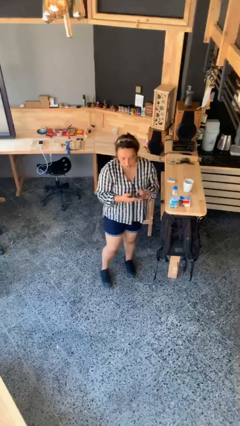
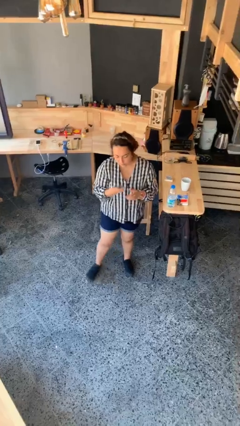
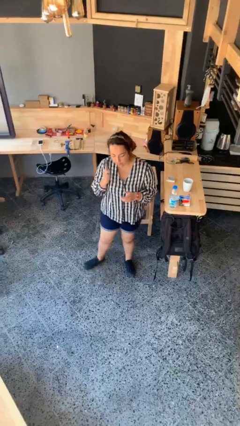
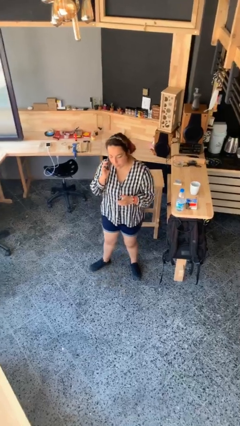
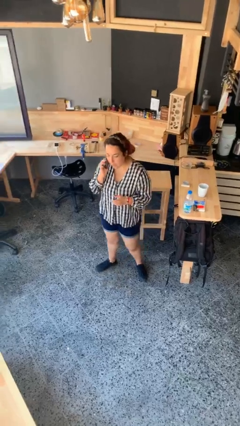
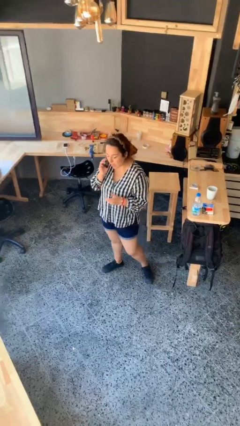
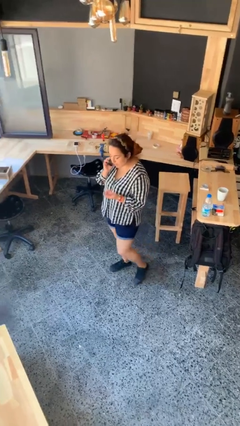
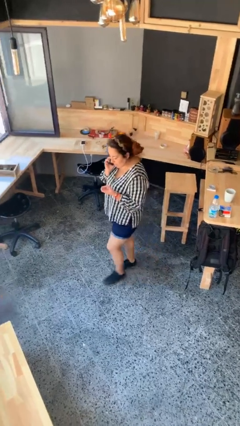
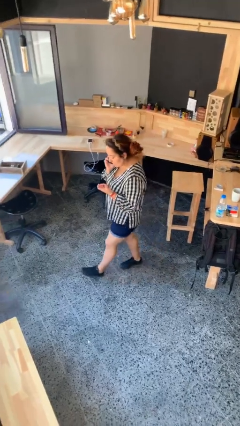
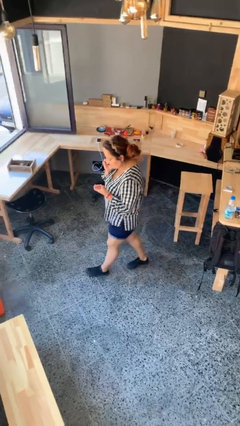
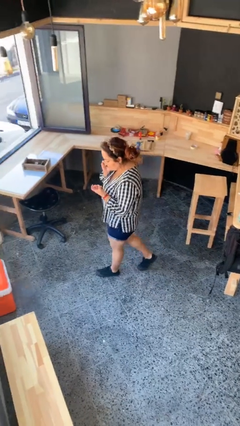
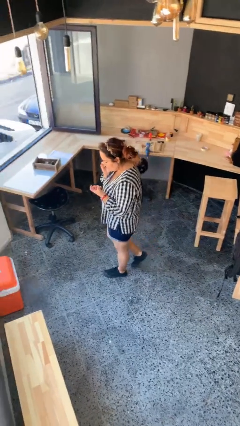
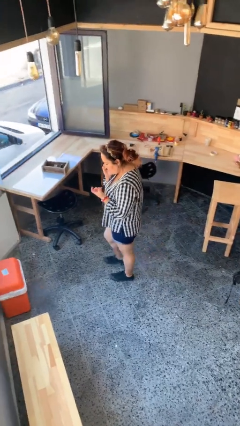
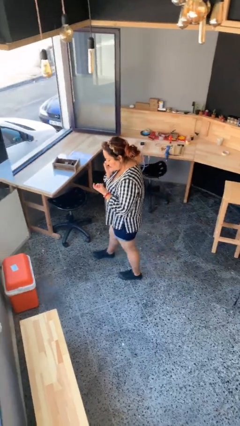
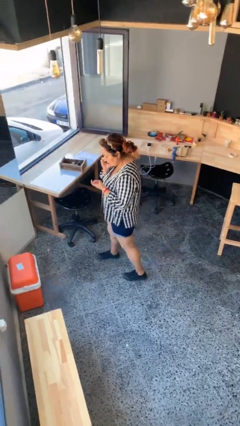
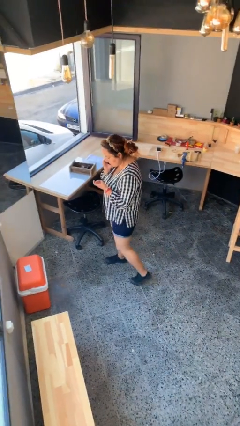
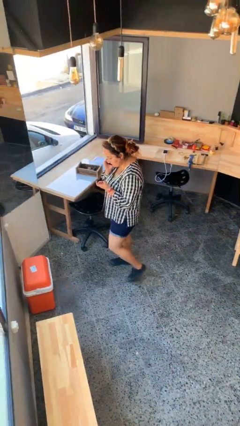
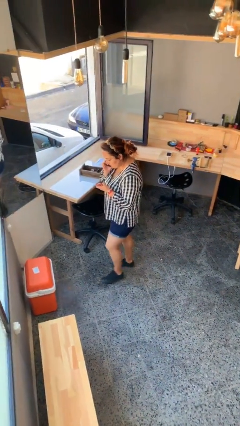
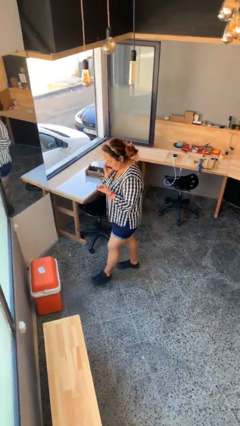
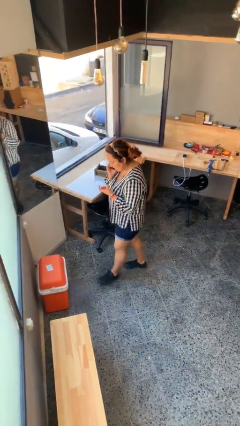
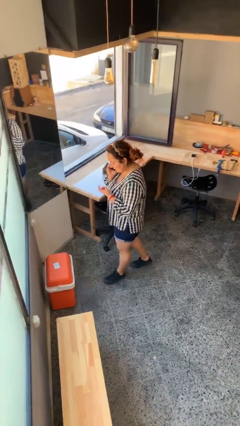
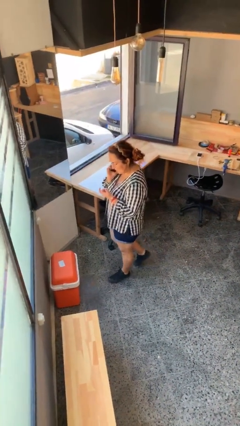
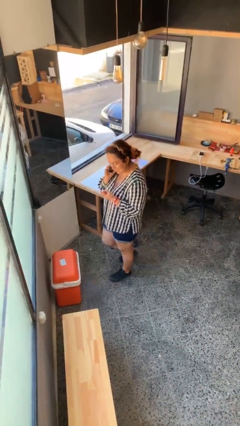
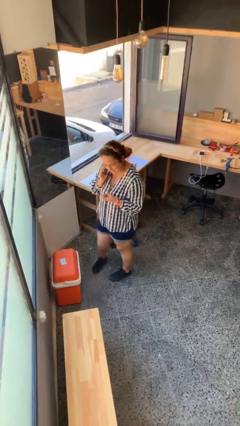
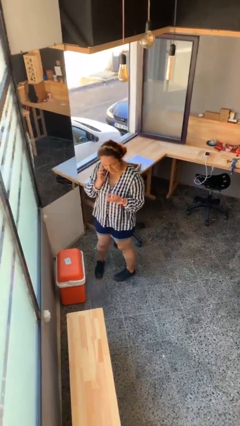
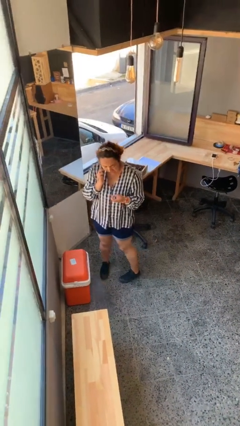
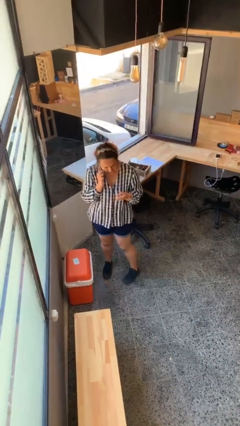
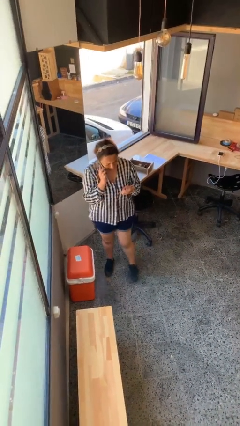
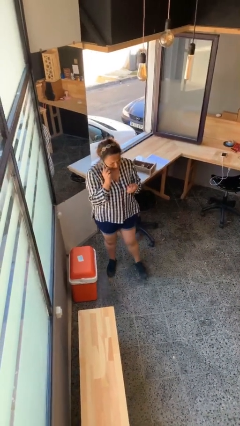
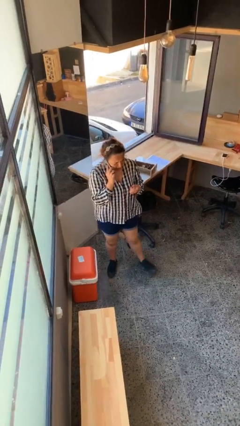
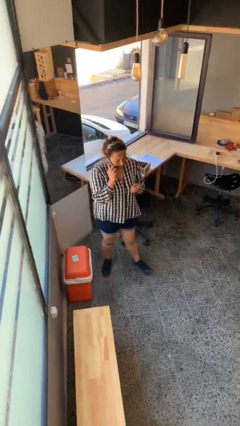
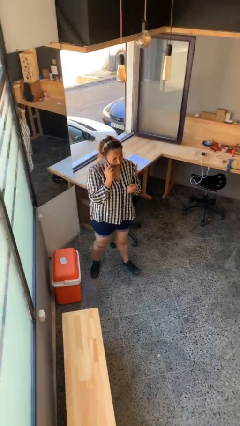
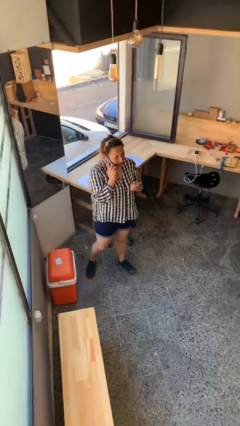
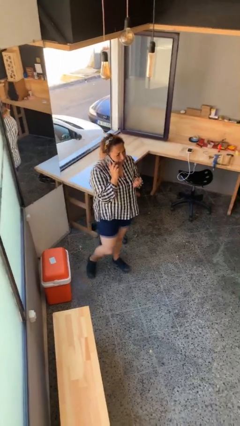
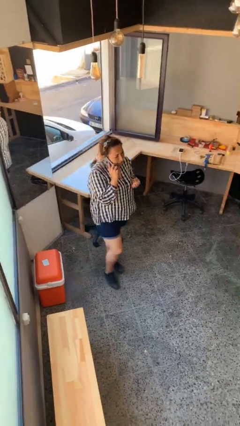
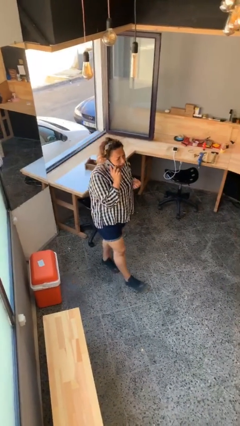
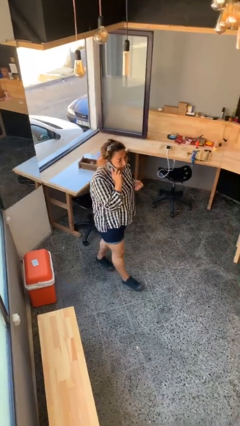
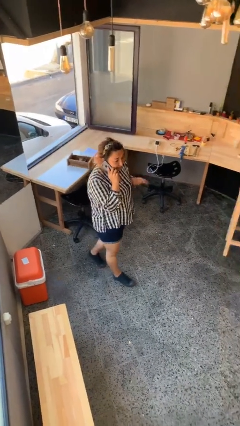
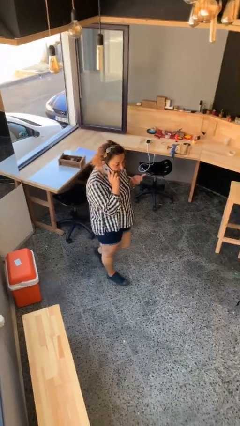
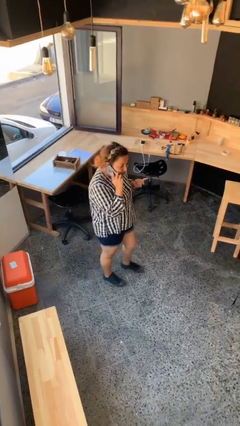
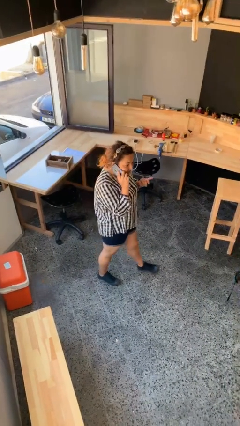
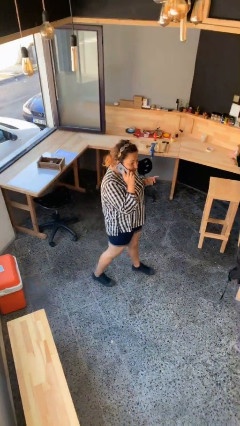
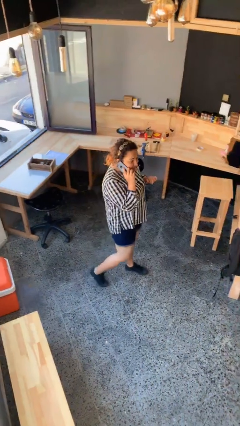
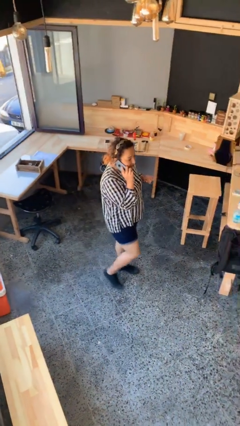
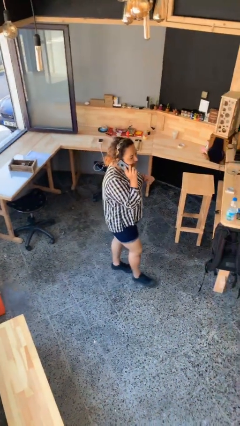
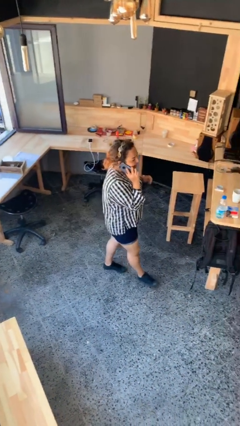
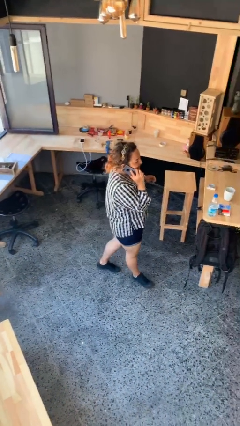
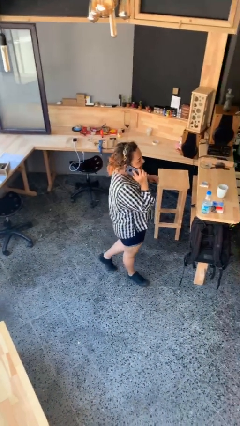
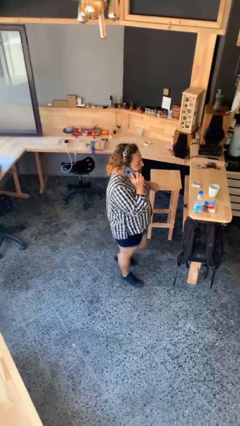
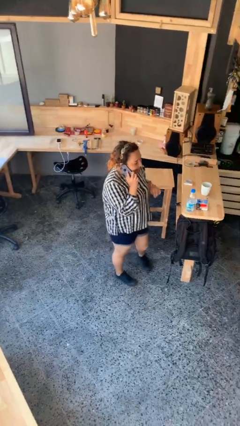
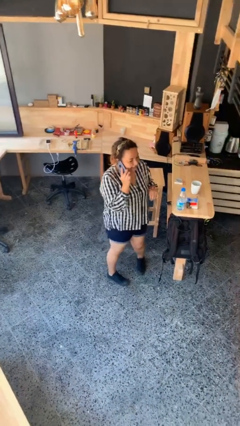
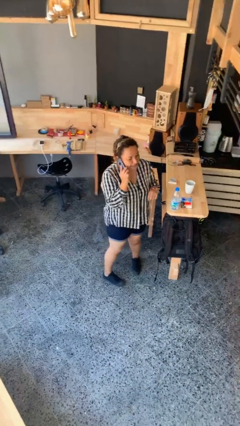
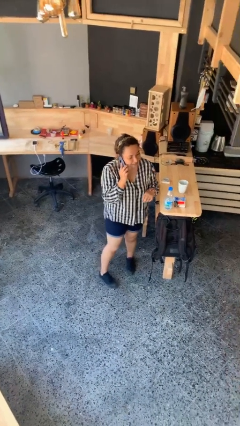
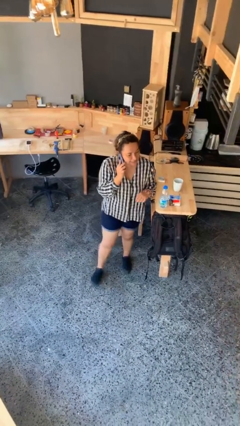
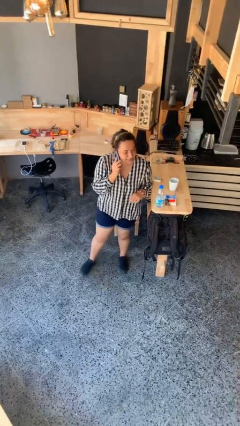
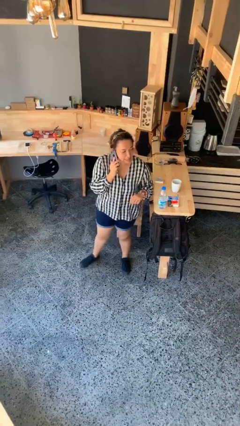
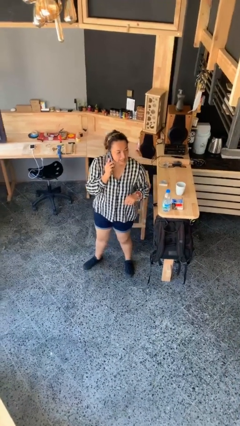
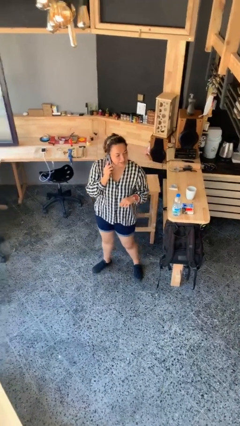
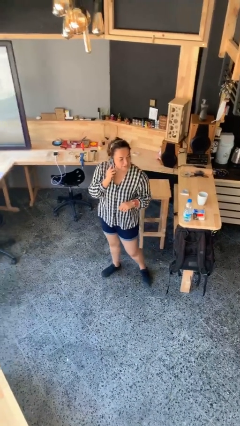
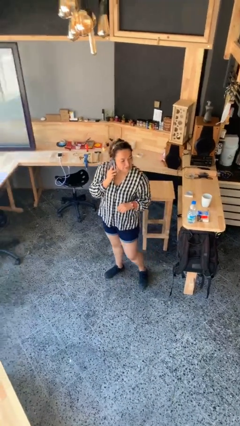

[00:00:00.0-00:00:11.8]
person talks on phone

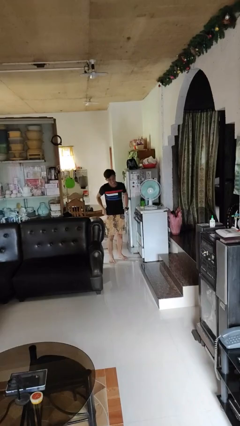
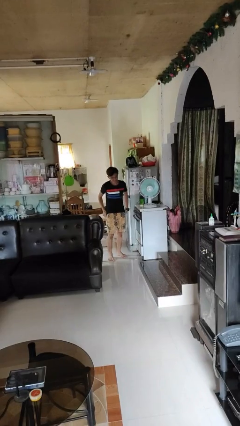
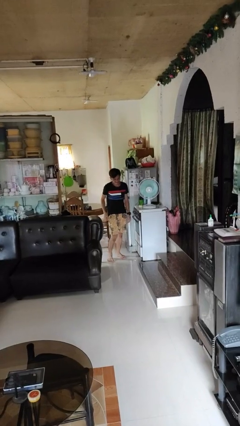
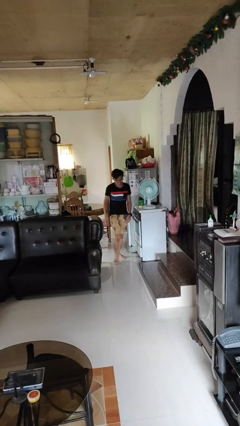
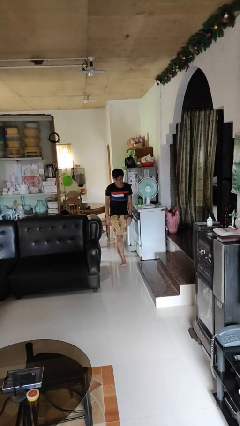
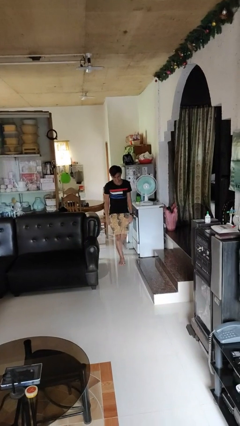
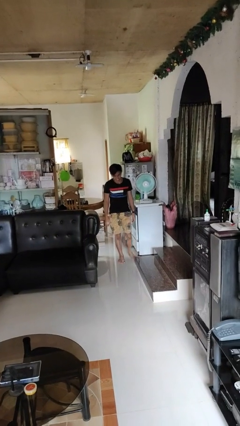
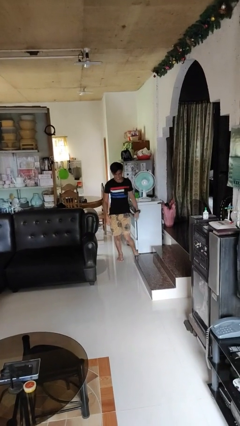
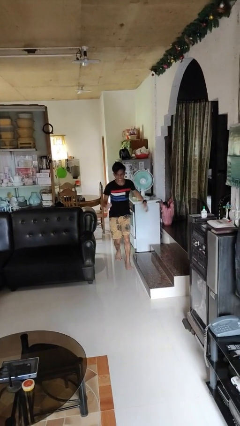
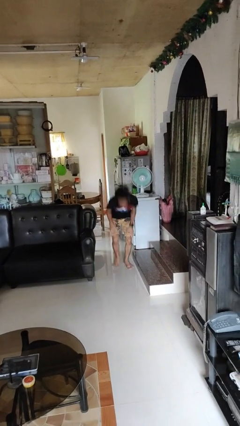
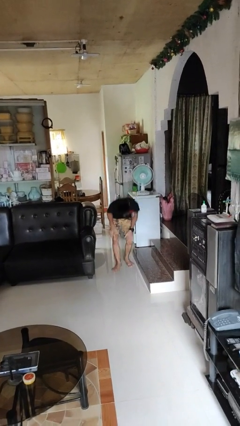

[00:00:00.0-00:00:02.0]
person trips on object on floor

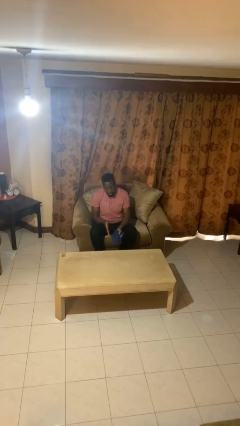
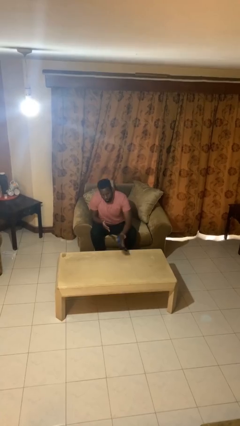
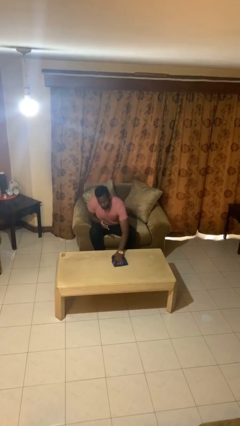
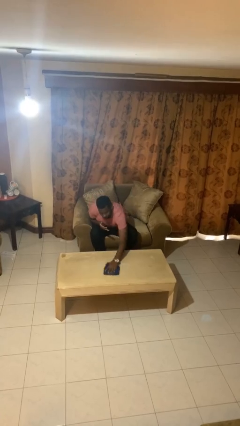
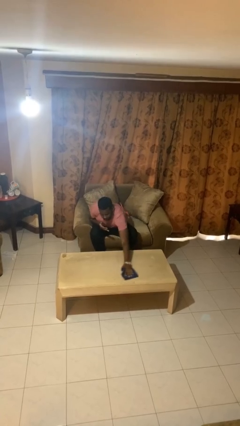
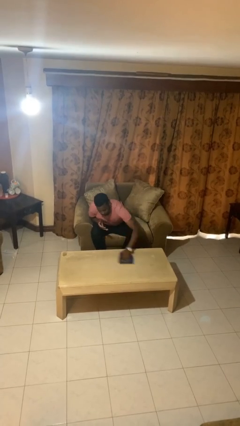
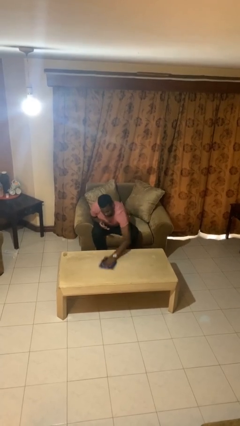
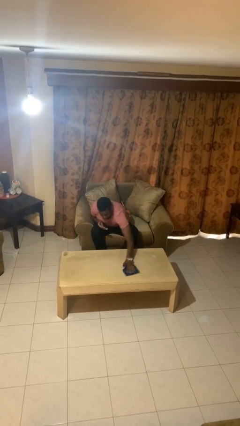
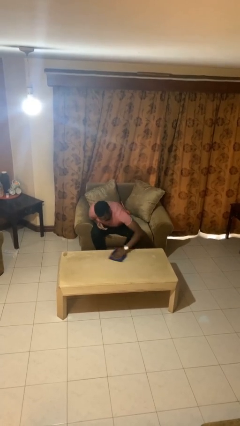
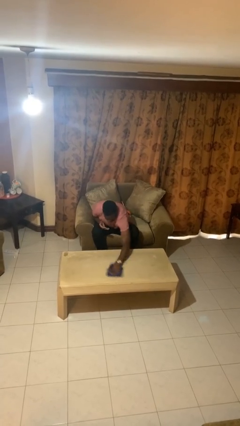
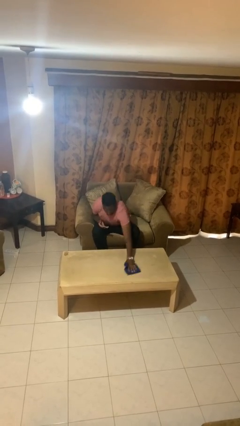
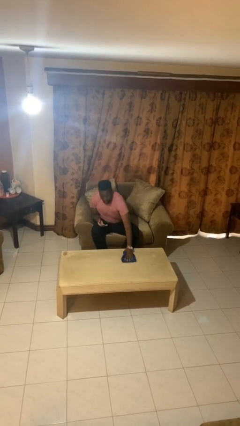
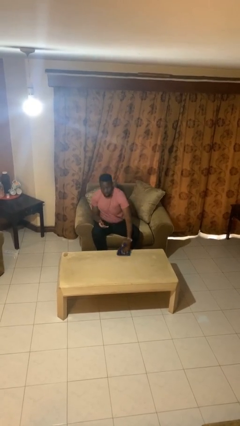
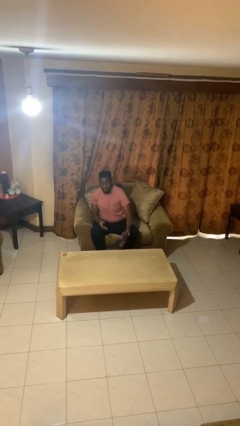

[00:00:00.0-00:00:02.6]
person cleans table with rag

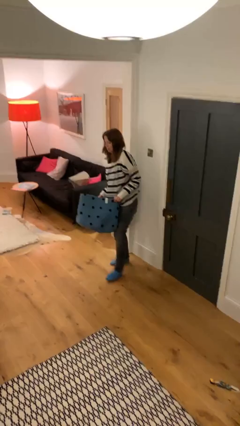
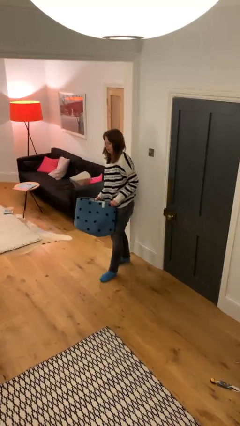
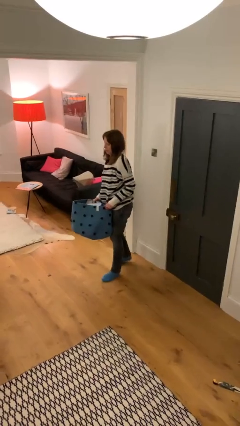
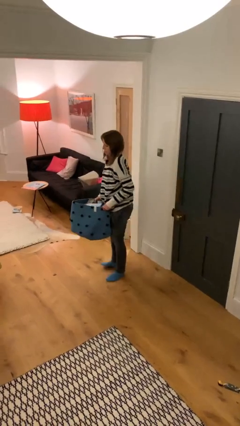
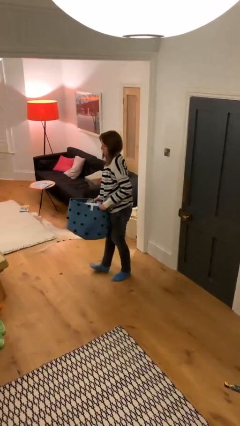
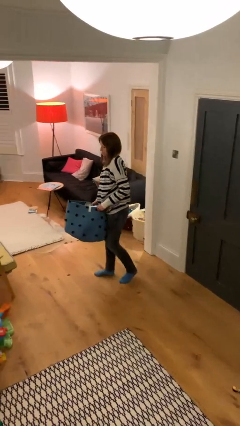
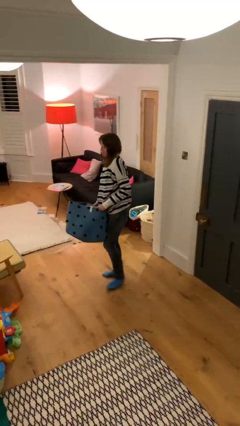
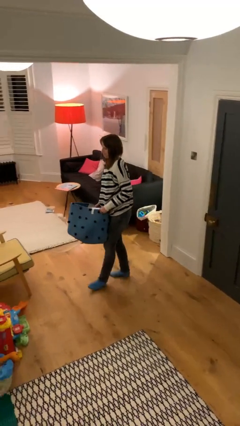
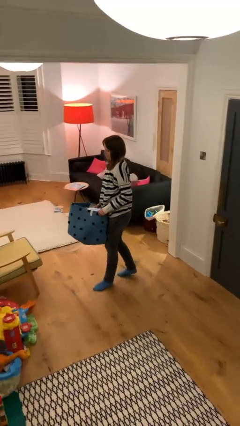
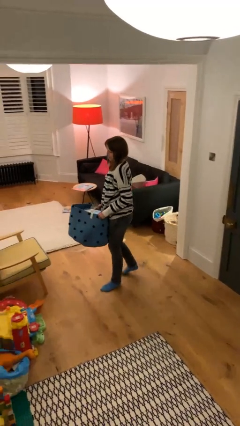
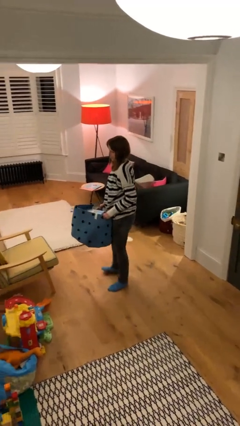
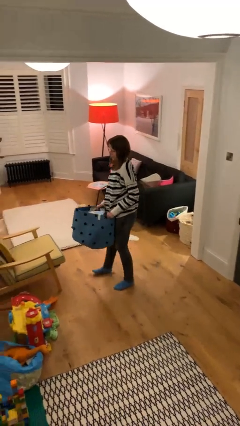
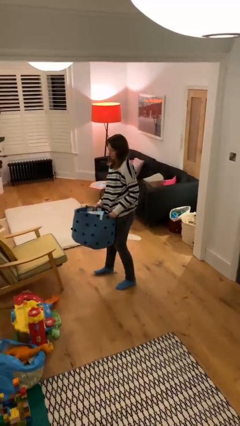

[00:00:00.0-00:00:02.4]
person carries heavy object
